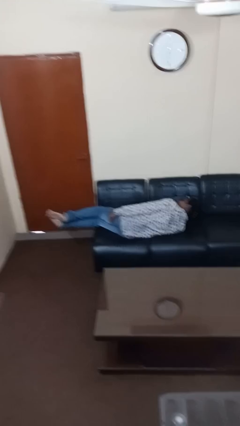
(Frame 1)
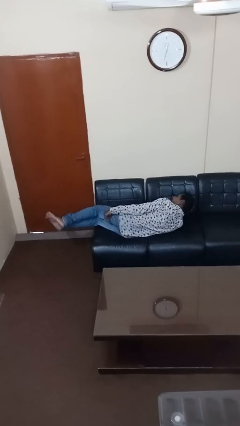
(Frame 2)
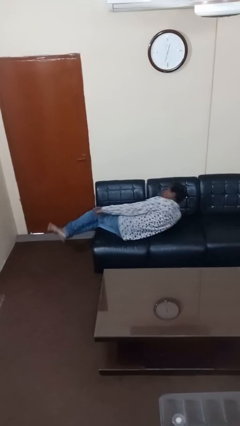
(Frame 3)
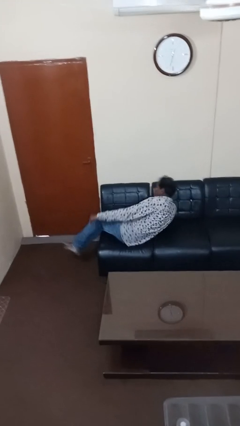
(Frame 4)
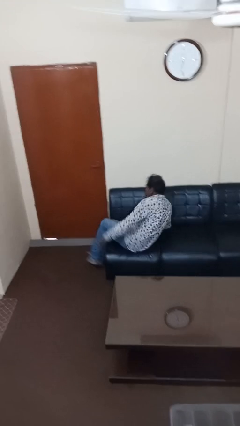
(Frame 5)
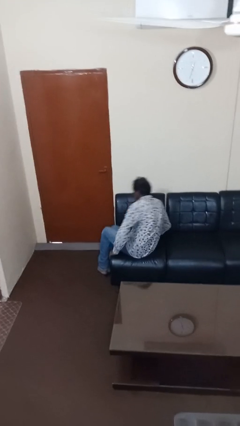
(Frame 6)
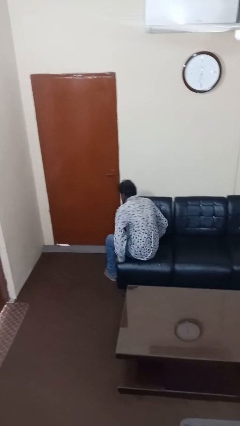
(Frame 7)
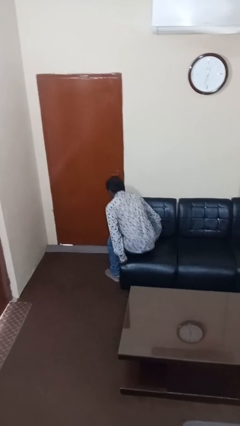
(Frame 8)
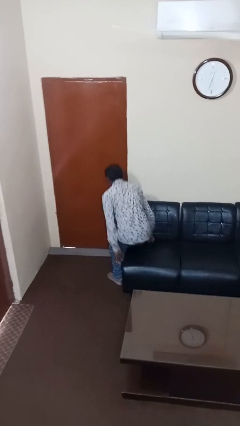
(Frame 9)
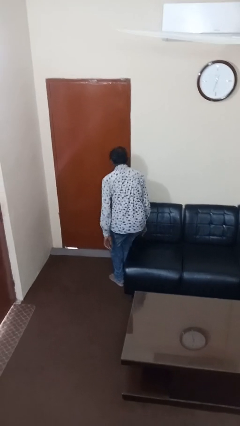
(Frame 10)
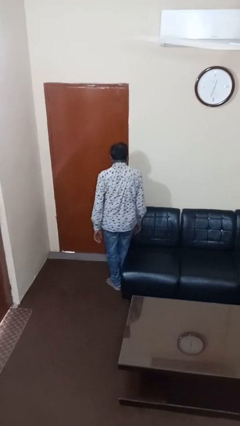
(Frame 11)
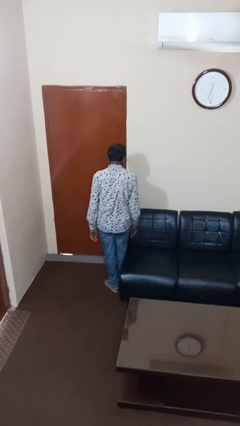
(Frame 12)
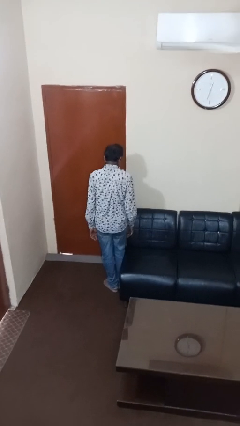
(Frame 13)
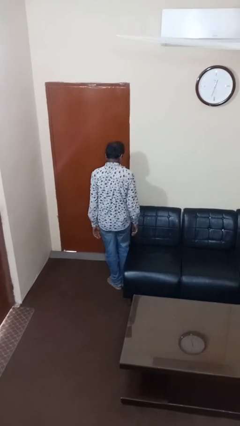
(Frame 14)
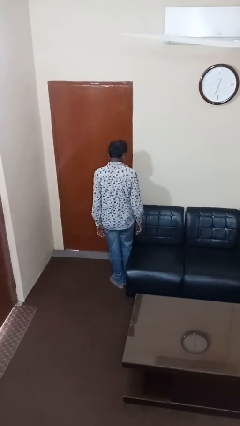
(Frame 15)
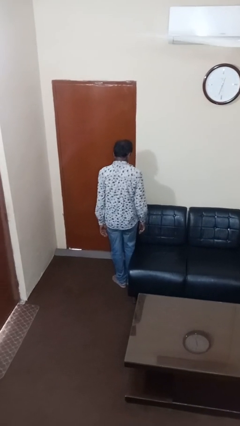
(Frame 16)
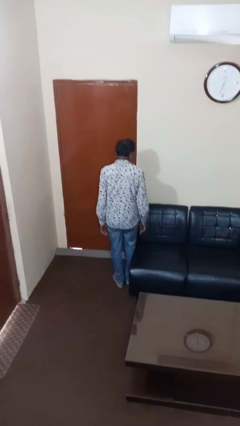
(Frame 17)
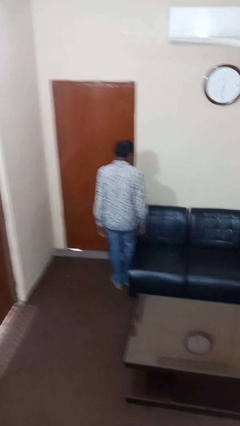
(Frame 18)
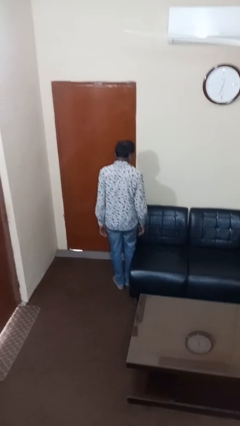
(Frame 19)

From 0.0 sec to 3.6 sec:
person stands up

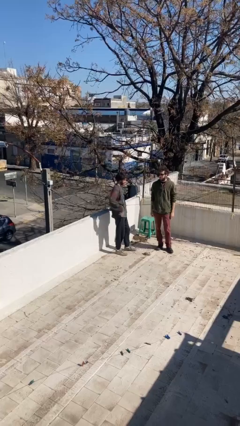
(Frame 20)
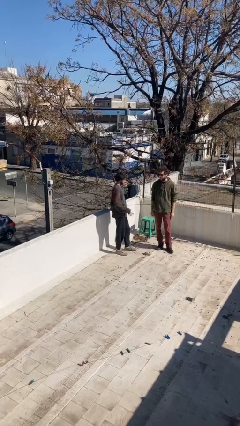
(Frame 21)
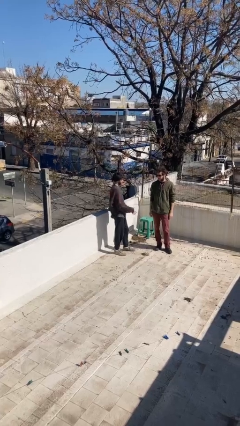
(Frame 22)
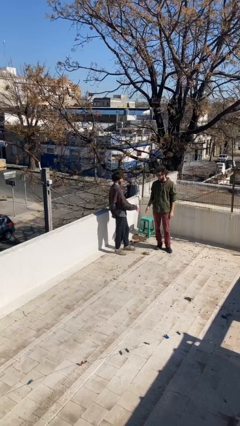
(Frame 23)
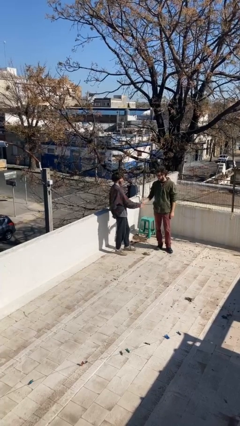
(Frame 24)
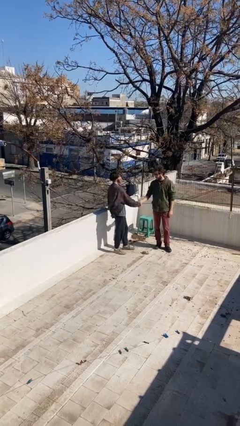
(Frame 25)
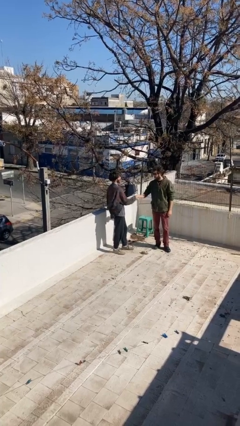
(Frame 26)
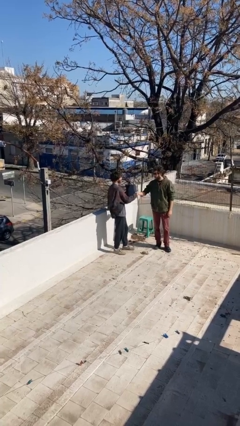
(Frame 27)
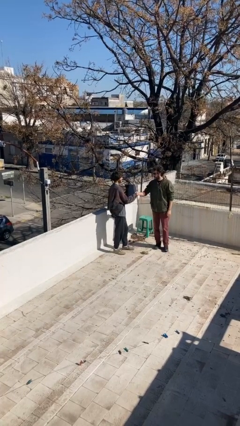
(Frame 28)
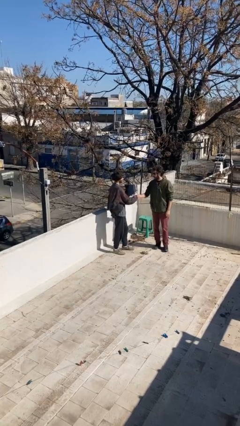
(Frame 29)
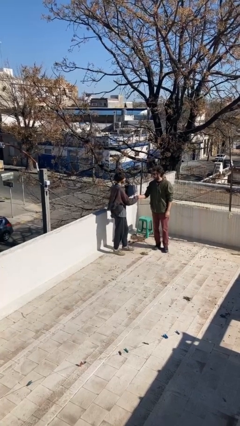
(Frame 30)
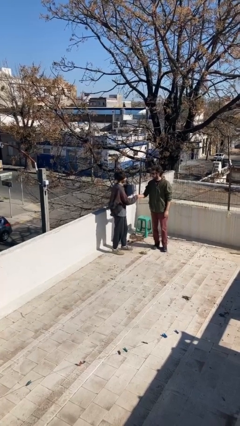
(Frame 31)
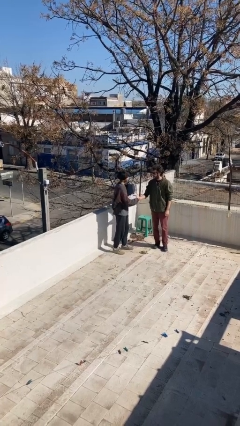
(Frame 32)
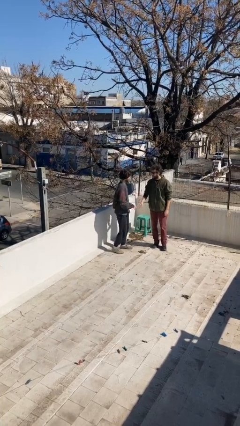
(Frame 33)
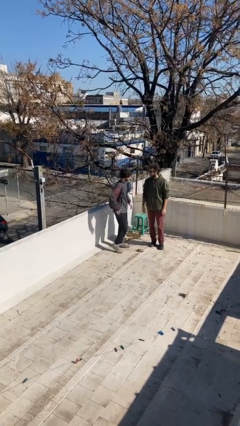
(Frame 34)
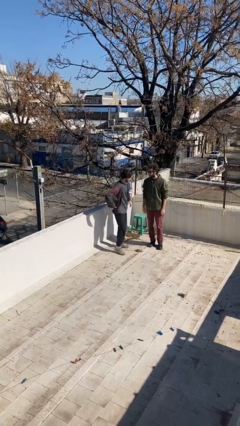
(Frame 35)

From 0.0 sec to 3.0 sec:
person shakes hand

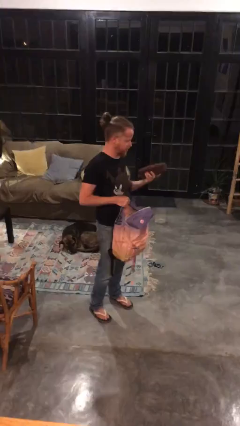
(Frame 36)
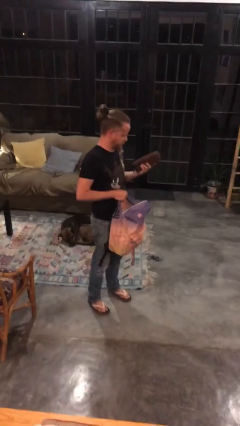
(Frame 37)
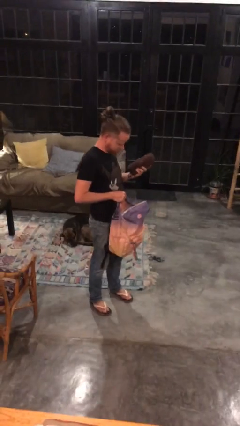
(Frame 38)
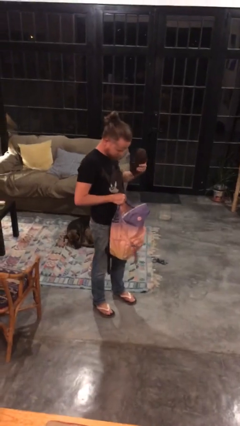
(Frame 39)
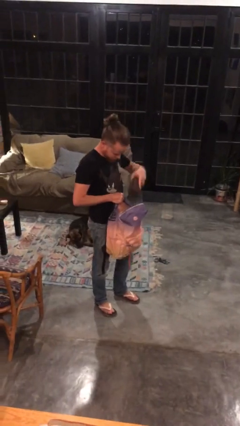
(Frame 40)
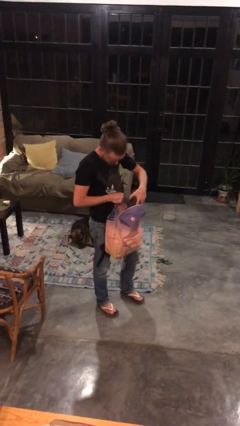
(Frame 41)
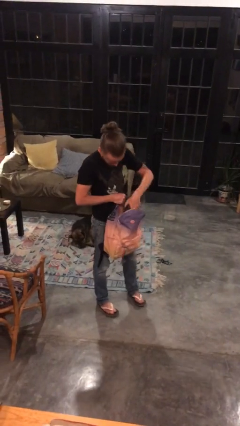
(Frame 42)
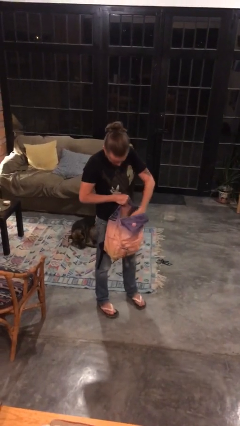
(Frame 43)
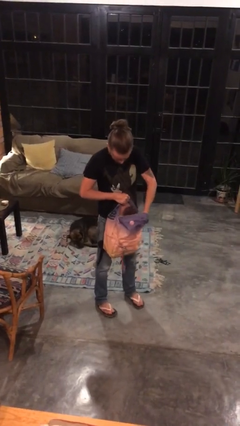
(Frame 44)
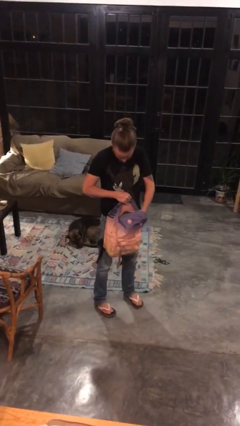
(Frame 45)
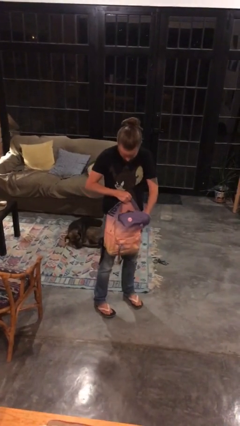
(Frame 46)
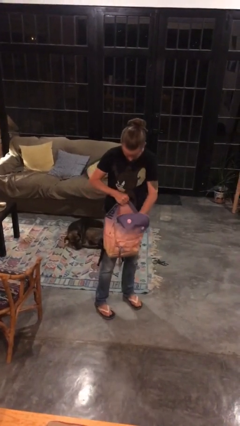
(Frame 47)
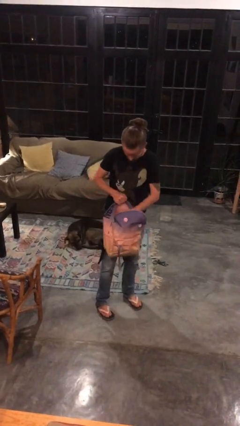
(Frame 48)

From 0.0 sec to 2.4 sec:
person puts object into backpack

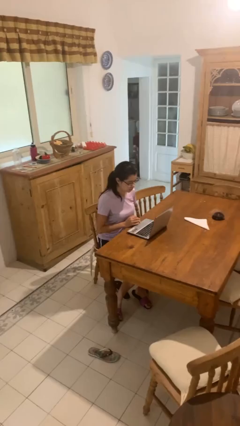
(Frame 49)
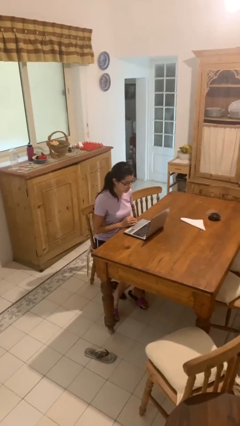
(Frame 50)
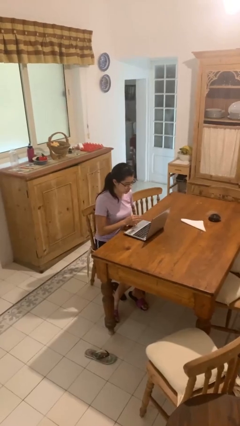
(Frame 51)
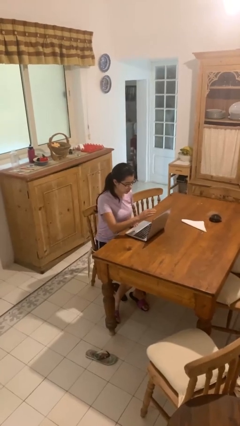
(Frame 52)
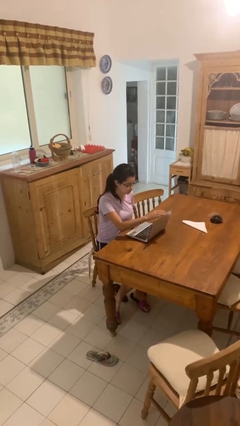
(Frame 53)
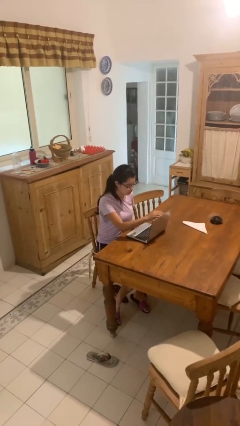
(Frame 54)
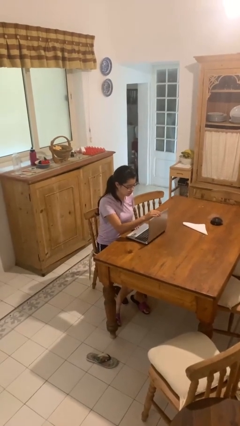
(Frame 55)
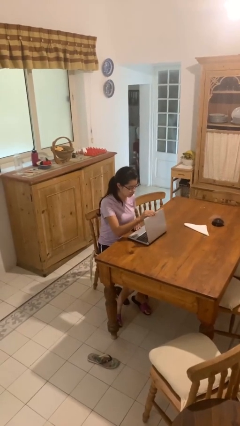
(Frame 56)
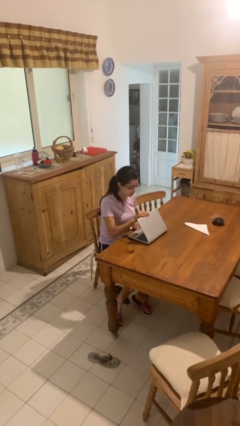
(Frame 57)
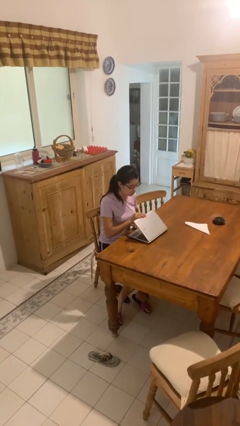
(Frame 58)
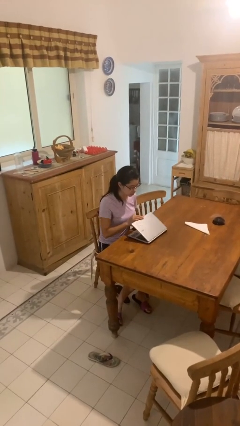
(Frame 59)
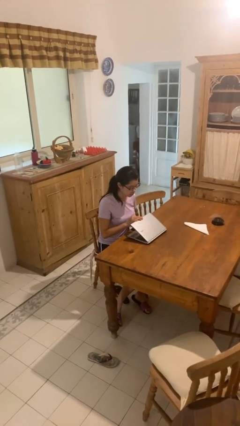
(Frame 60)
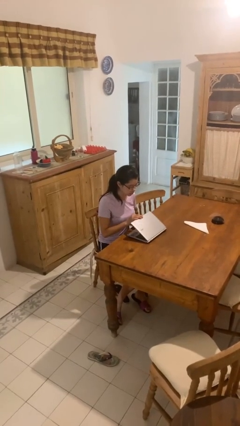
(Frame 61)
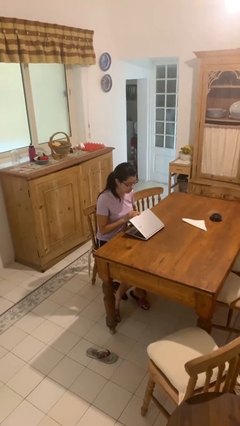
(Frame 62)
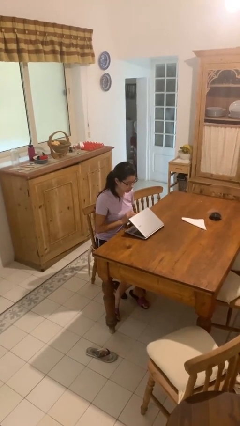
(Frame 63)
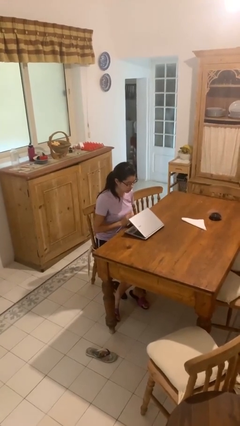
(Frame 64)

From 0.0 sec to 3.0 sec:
person closes laptop

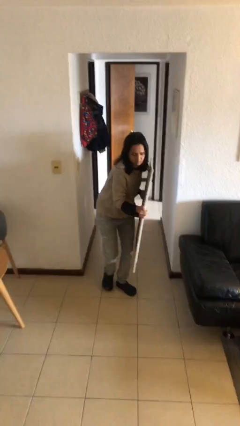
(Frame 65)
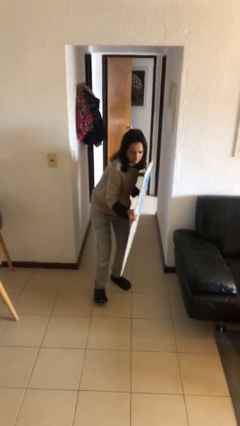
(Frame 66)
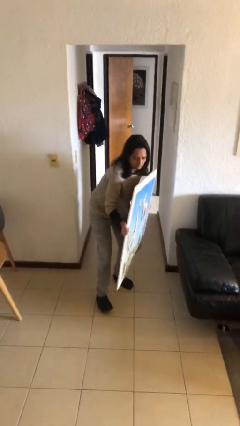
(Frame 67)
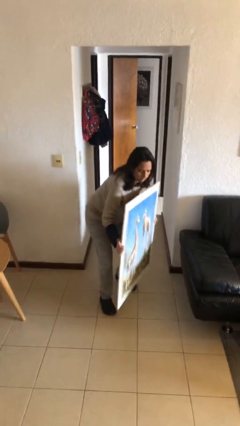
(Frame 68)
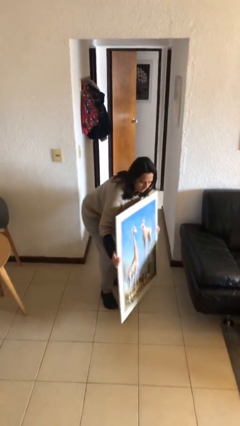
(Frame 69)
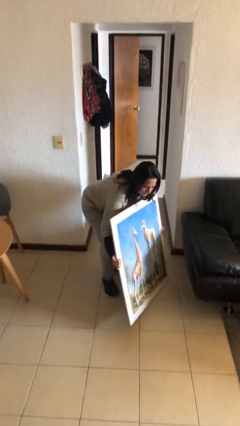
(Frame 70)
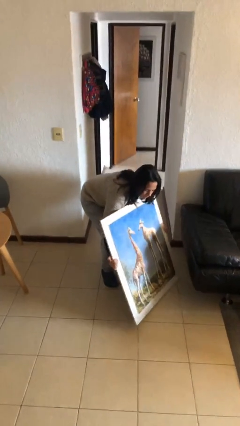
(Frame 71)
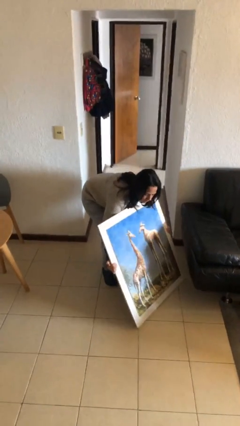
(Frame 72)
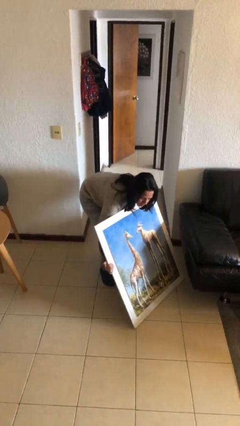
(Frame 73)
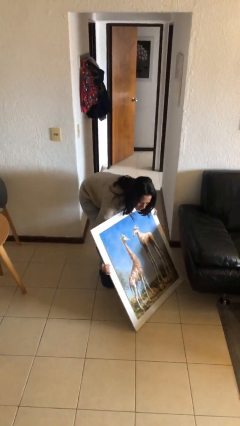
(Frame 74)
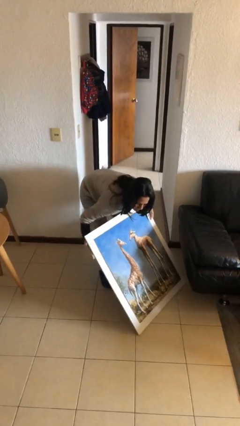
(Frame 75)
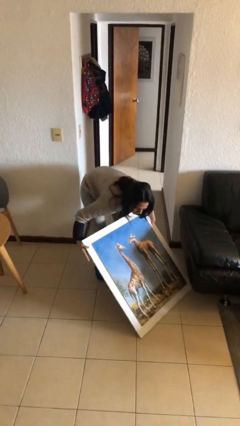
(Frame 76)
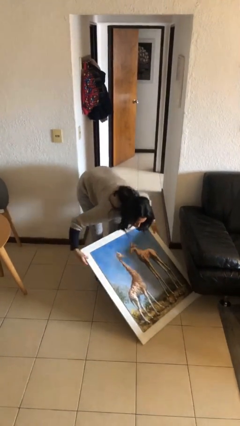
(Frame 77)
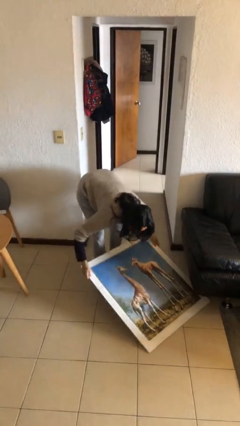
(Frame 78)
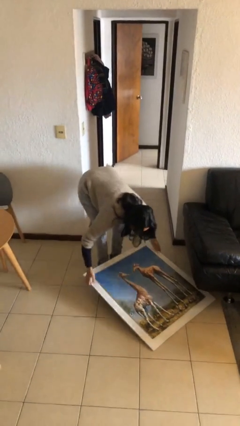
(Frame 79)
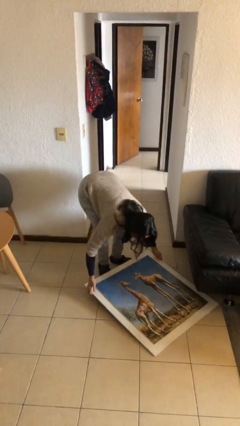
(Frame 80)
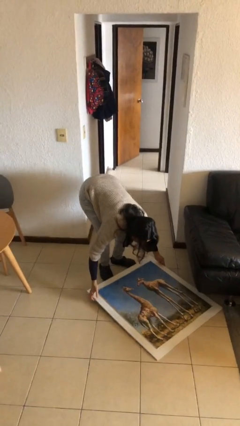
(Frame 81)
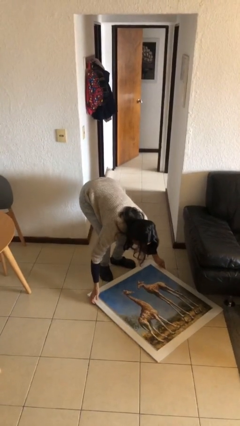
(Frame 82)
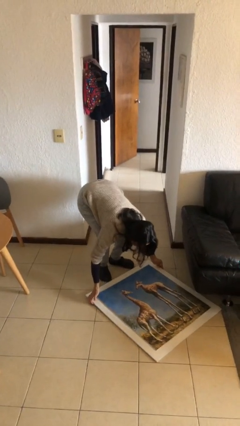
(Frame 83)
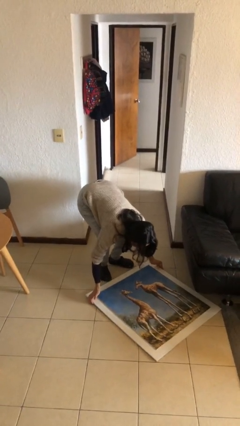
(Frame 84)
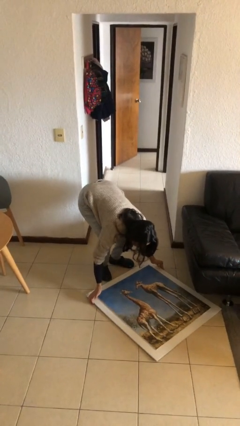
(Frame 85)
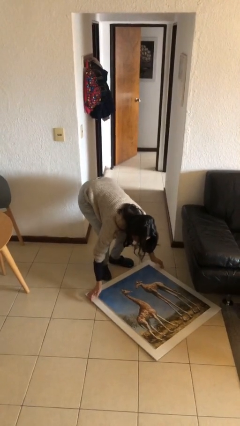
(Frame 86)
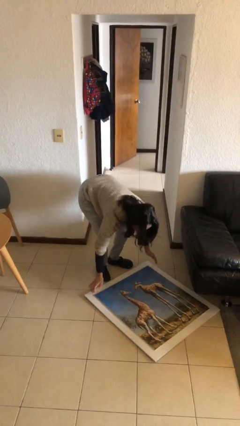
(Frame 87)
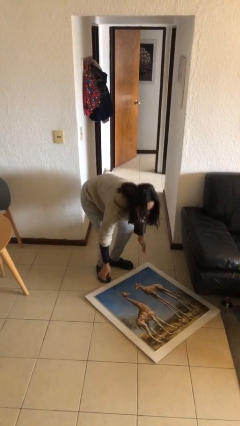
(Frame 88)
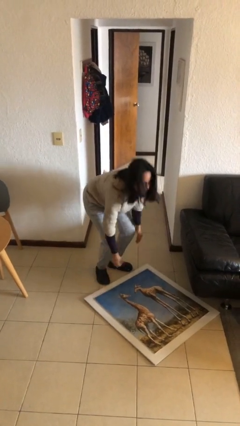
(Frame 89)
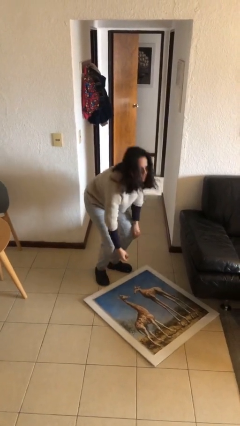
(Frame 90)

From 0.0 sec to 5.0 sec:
person puts down object on floor

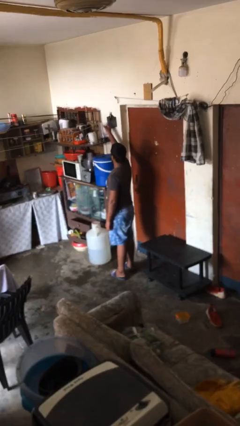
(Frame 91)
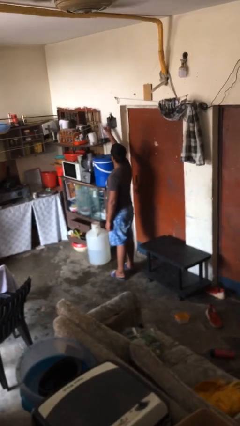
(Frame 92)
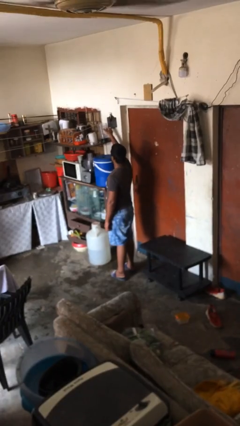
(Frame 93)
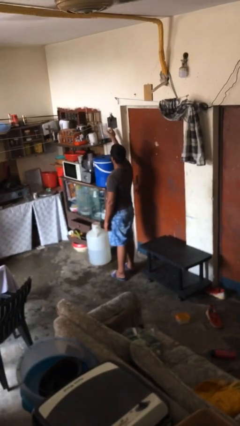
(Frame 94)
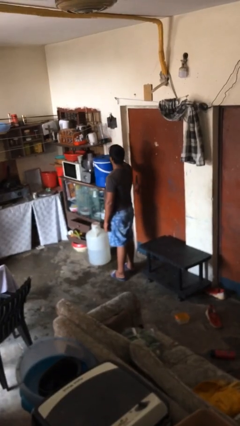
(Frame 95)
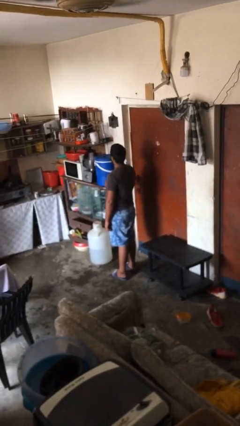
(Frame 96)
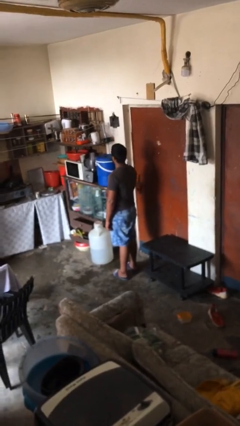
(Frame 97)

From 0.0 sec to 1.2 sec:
person puts down object on shelf
